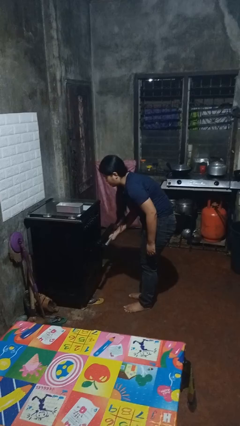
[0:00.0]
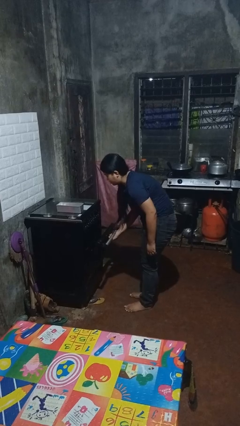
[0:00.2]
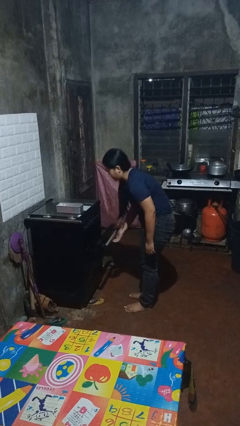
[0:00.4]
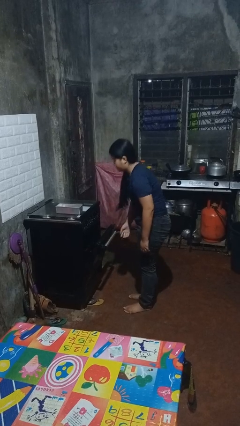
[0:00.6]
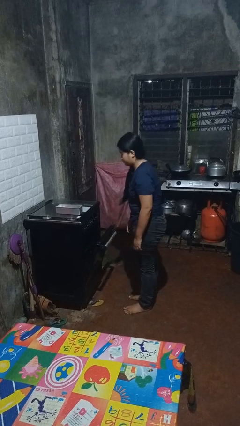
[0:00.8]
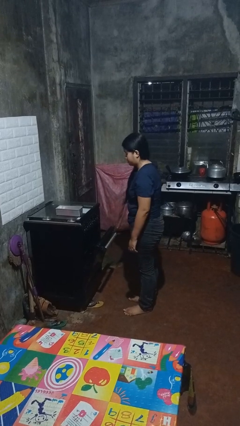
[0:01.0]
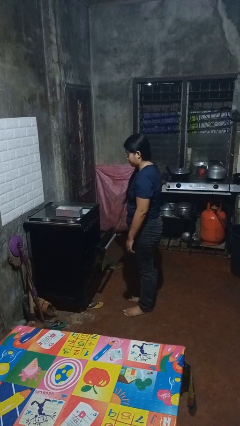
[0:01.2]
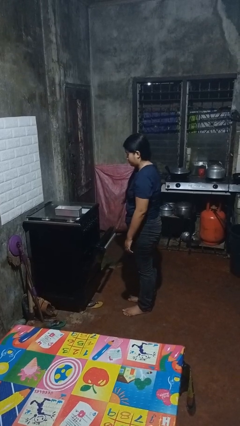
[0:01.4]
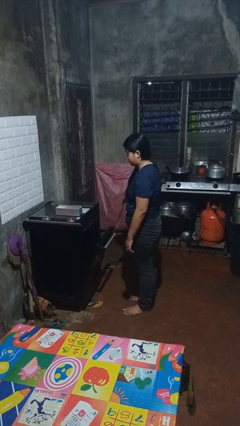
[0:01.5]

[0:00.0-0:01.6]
person opens oven door

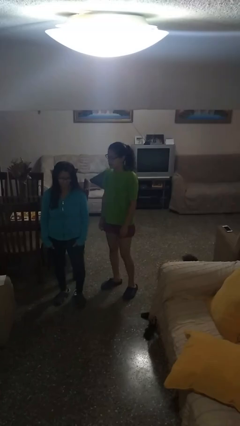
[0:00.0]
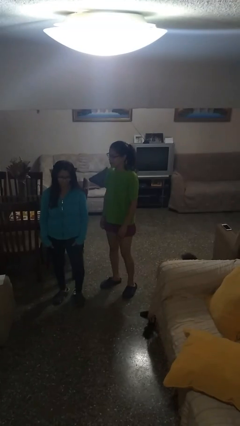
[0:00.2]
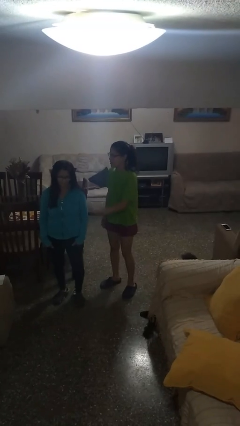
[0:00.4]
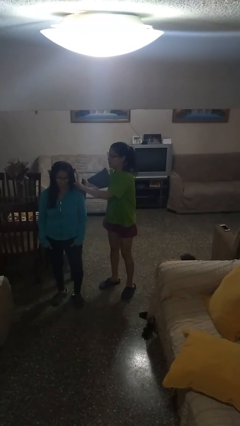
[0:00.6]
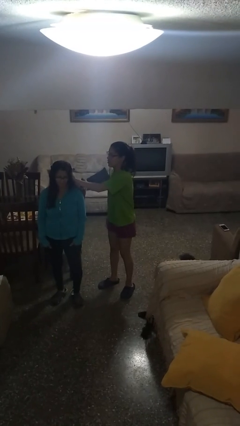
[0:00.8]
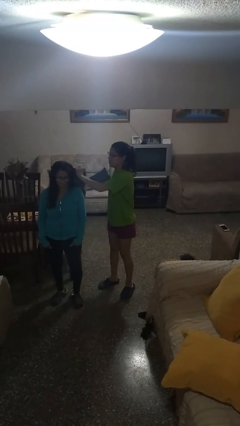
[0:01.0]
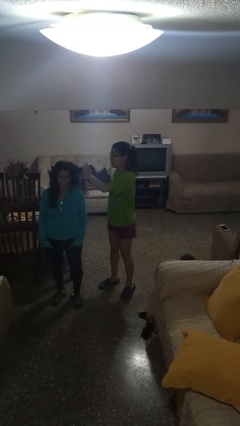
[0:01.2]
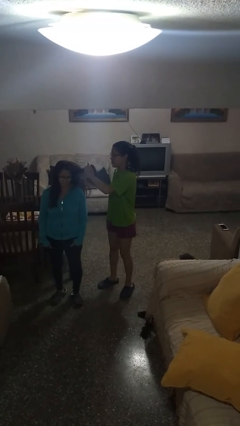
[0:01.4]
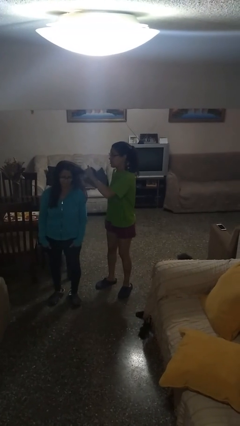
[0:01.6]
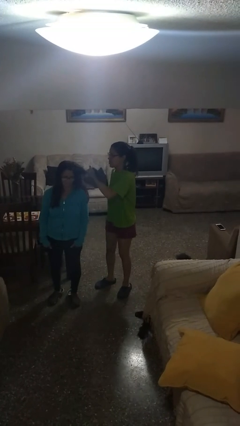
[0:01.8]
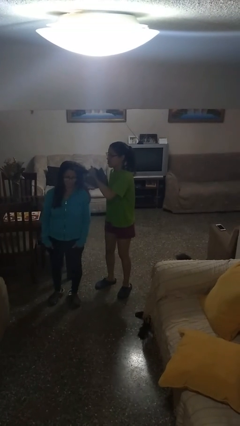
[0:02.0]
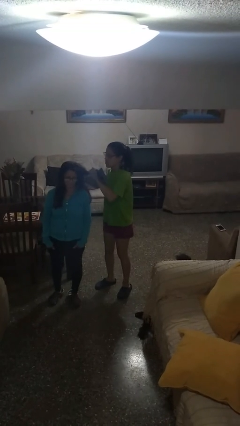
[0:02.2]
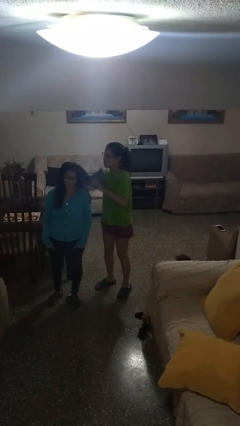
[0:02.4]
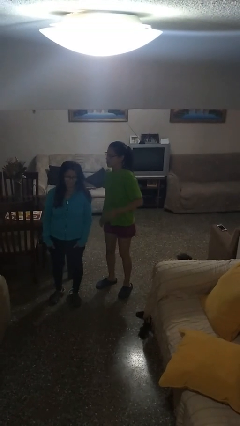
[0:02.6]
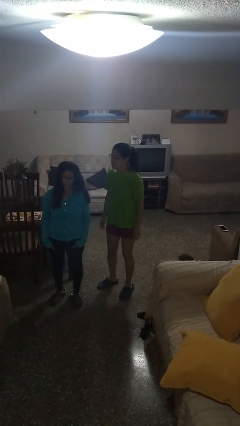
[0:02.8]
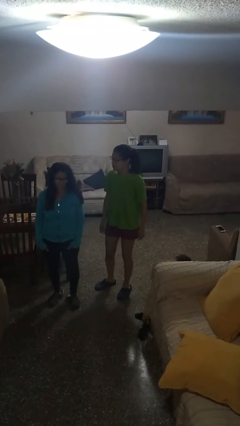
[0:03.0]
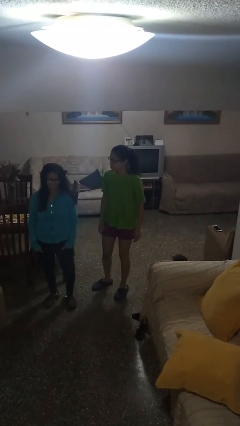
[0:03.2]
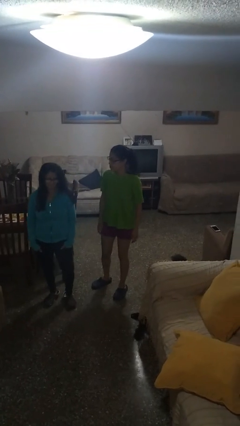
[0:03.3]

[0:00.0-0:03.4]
person grabs person by hair

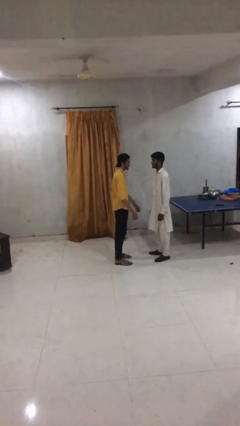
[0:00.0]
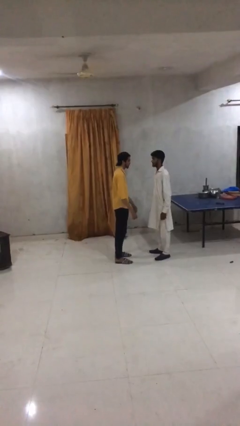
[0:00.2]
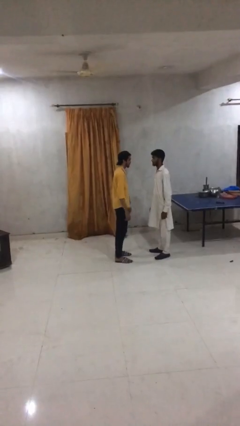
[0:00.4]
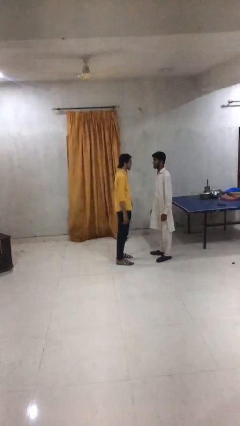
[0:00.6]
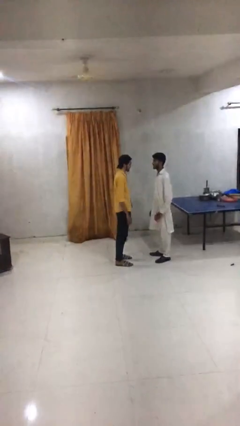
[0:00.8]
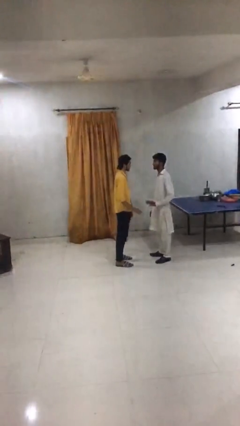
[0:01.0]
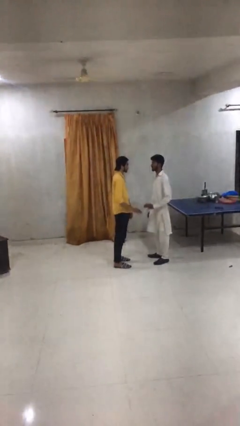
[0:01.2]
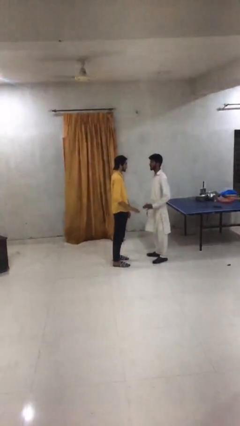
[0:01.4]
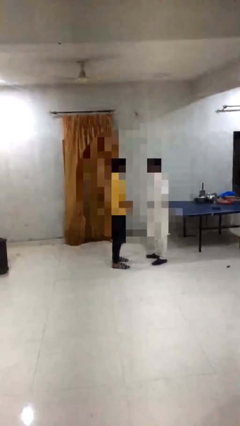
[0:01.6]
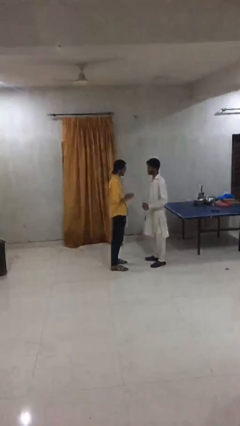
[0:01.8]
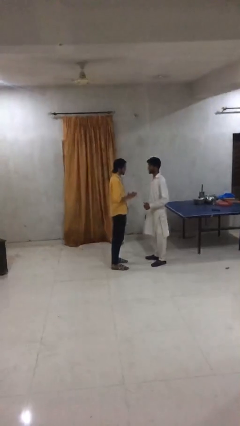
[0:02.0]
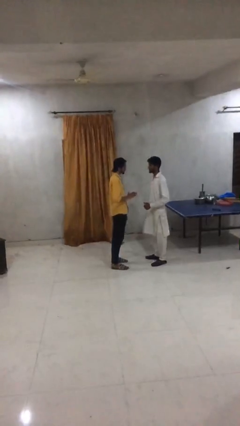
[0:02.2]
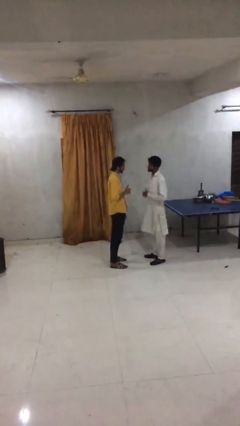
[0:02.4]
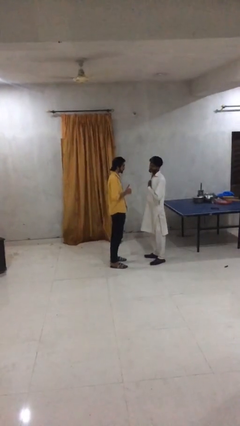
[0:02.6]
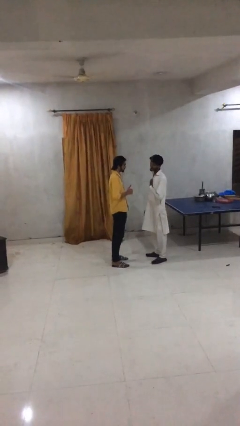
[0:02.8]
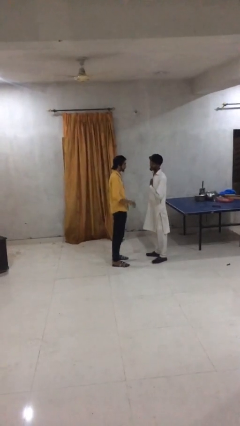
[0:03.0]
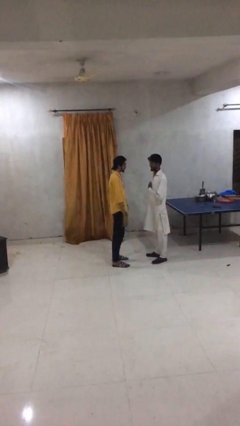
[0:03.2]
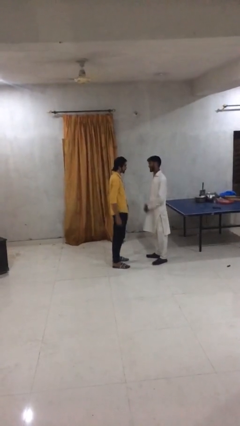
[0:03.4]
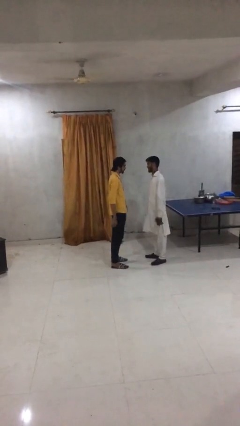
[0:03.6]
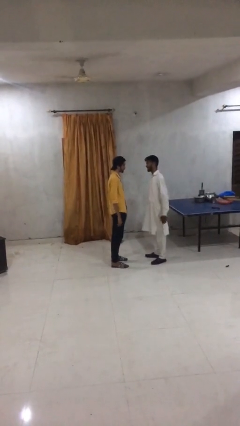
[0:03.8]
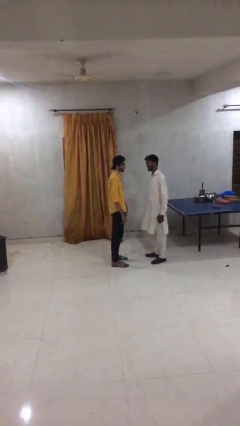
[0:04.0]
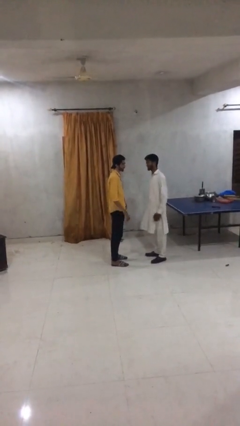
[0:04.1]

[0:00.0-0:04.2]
person talks to person

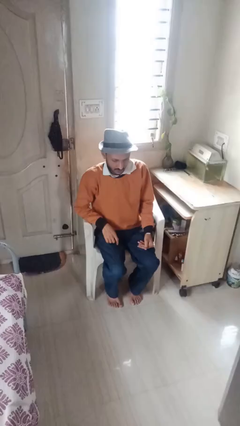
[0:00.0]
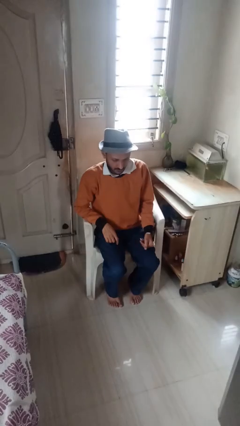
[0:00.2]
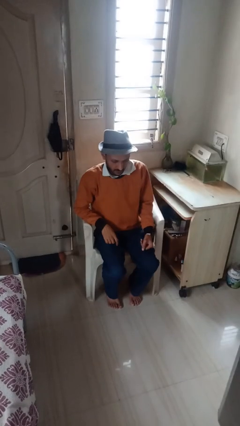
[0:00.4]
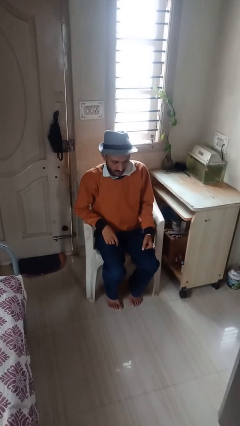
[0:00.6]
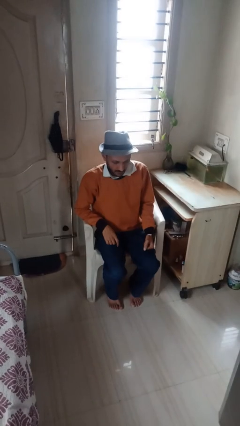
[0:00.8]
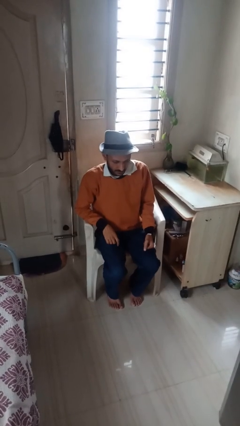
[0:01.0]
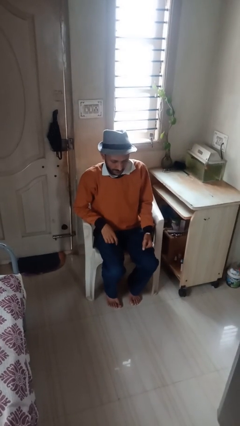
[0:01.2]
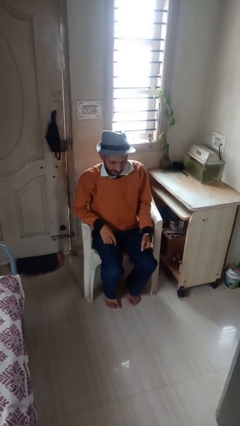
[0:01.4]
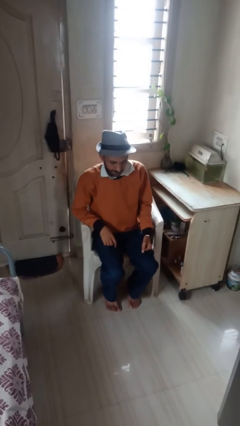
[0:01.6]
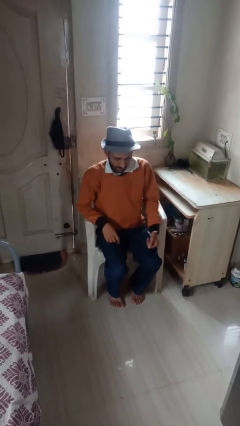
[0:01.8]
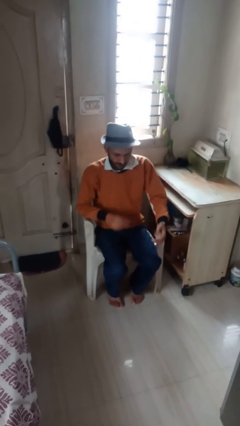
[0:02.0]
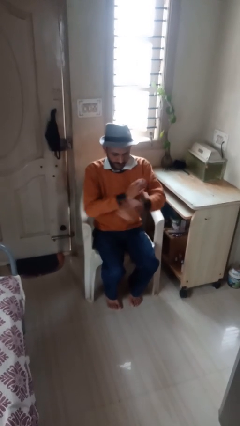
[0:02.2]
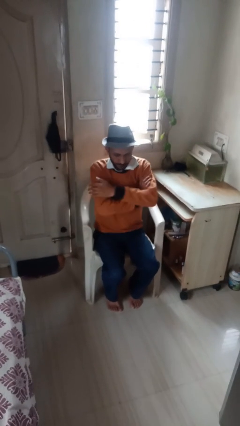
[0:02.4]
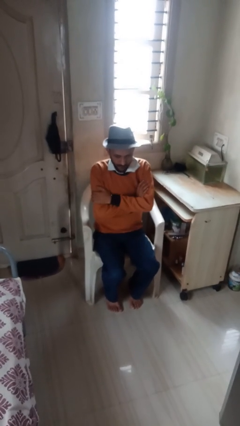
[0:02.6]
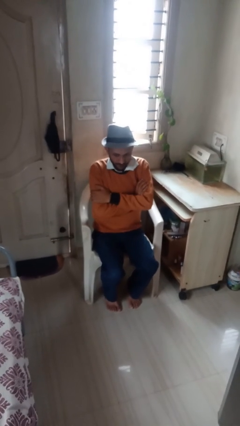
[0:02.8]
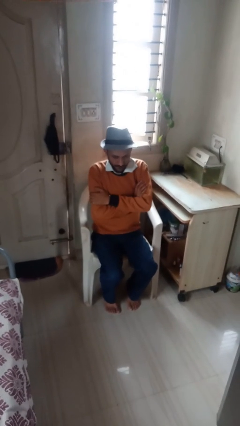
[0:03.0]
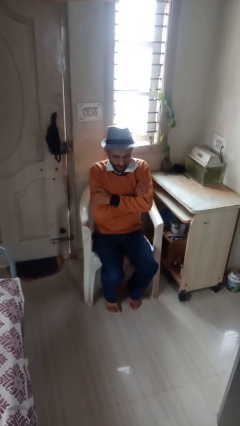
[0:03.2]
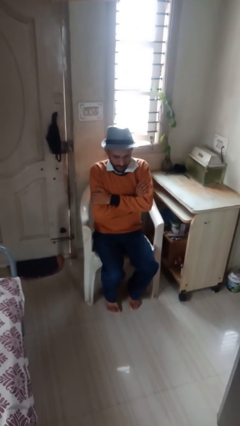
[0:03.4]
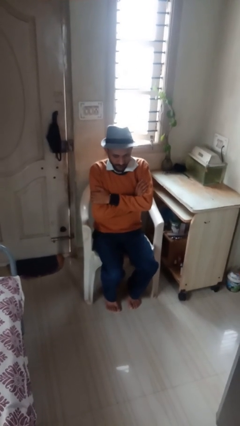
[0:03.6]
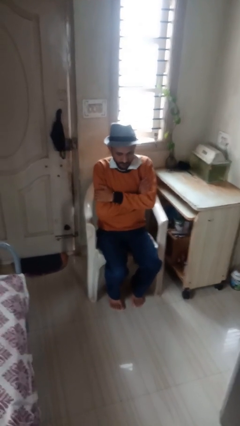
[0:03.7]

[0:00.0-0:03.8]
person crosses arms

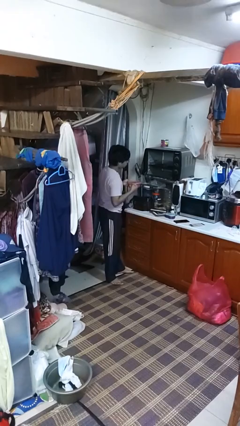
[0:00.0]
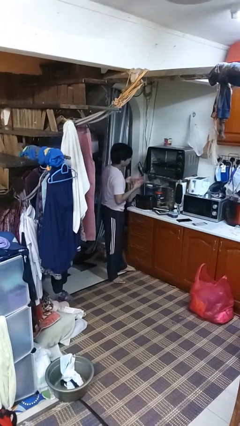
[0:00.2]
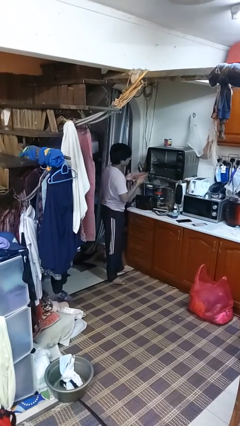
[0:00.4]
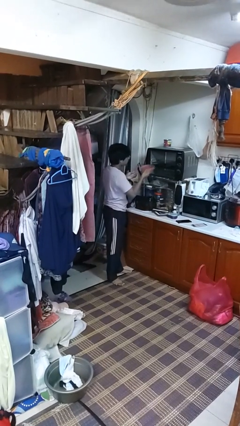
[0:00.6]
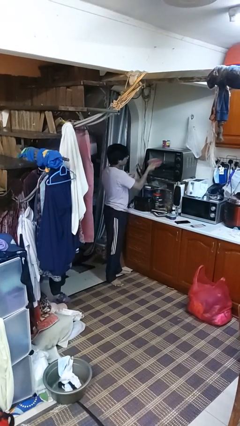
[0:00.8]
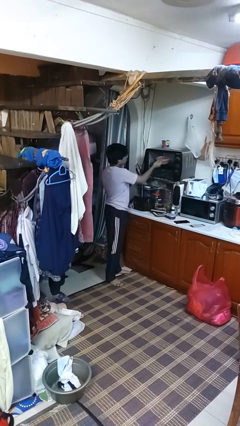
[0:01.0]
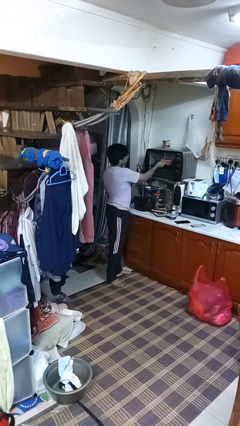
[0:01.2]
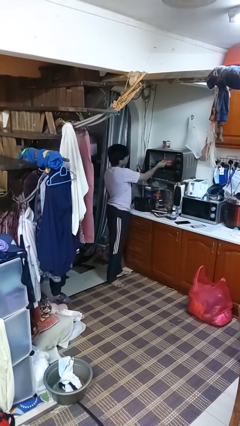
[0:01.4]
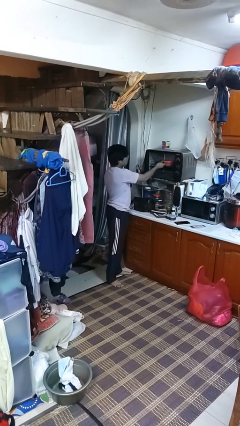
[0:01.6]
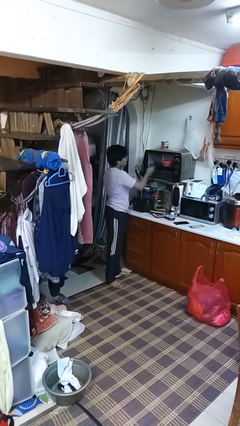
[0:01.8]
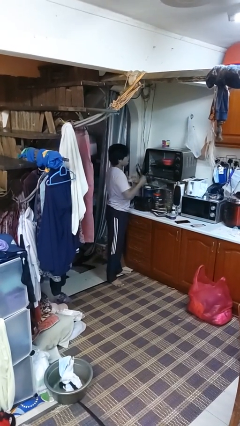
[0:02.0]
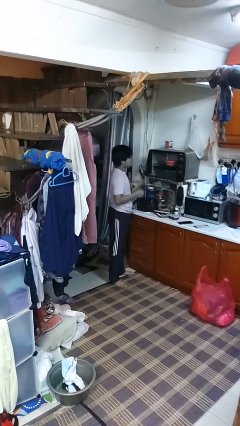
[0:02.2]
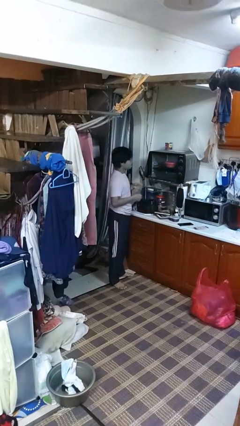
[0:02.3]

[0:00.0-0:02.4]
person puts object into oven

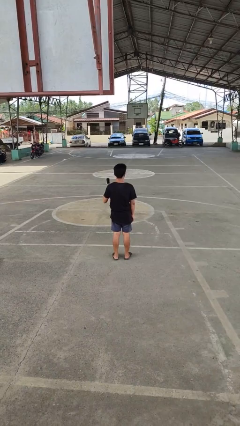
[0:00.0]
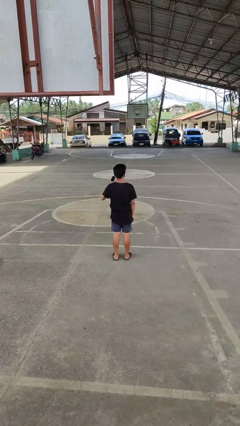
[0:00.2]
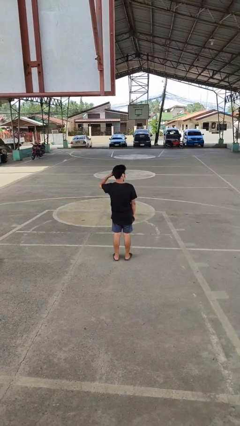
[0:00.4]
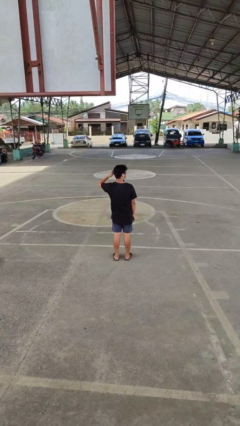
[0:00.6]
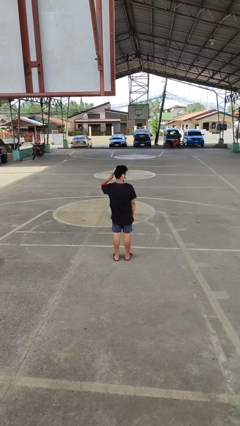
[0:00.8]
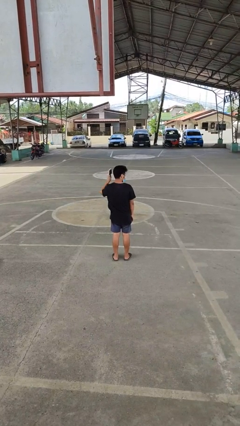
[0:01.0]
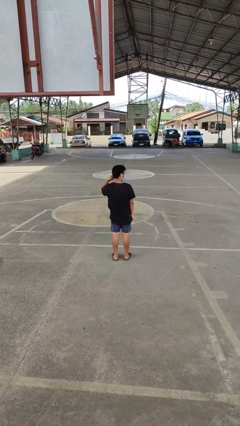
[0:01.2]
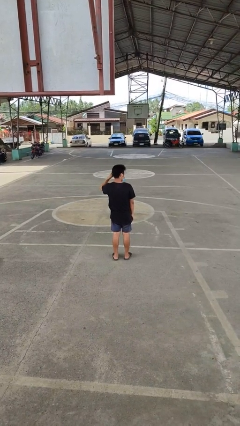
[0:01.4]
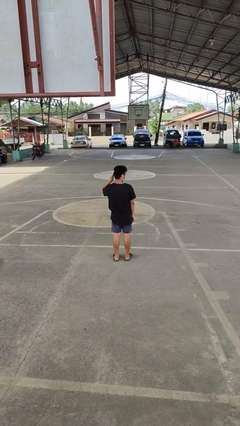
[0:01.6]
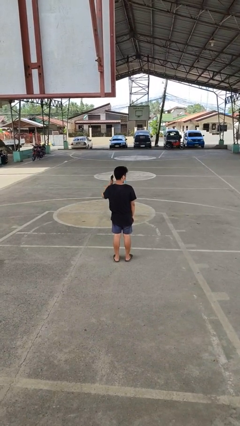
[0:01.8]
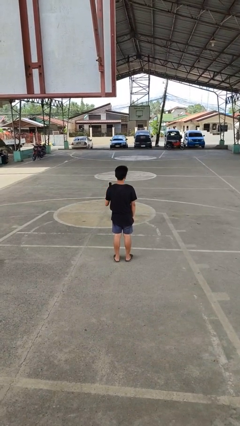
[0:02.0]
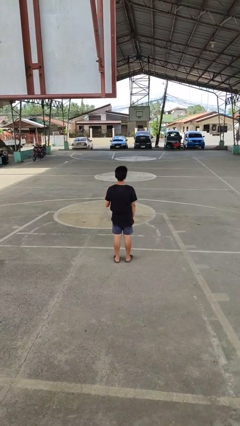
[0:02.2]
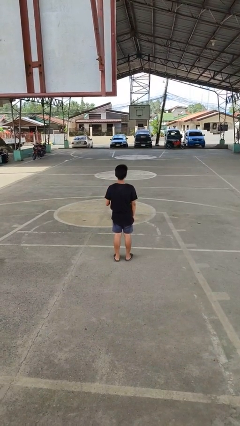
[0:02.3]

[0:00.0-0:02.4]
person brushes hair
